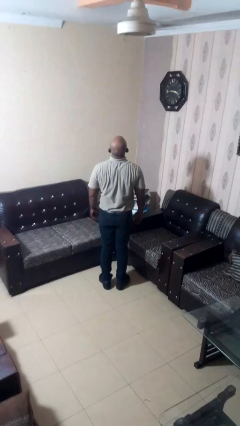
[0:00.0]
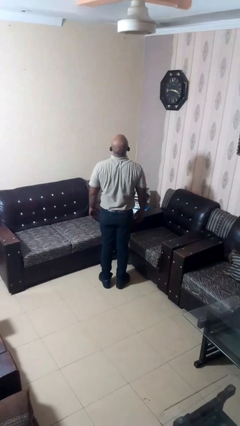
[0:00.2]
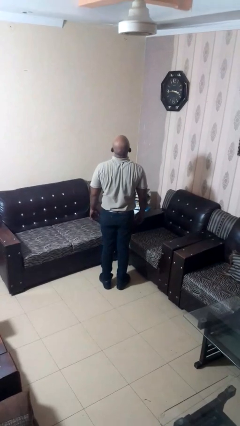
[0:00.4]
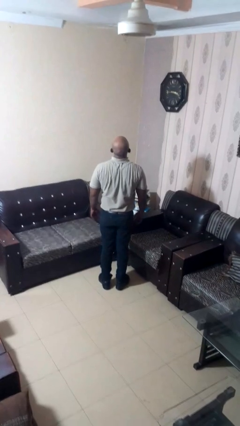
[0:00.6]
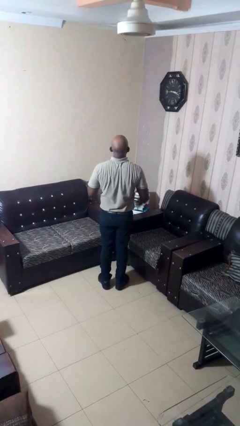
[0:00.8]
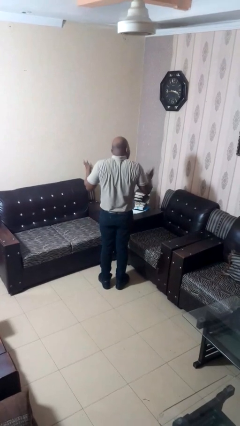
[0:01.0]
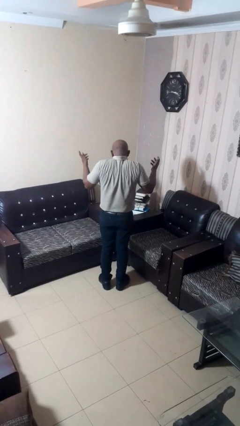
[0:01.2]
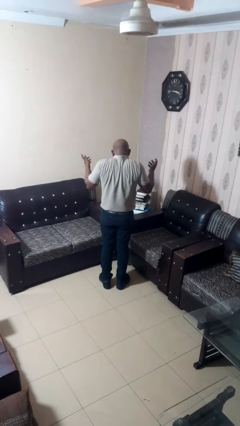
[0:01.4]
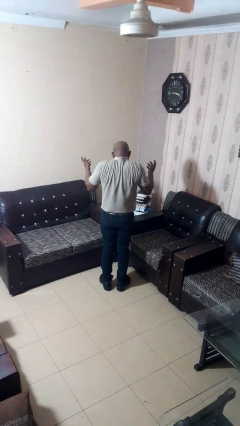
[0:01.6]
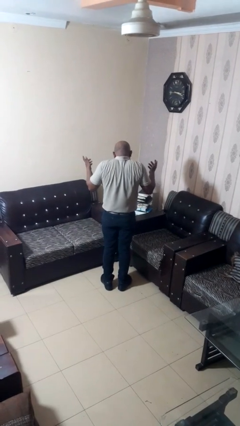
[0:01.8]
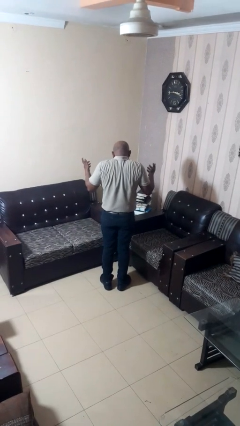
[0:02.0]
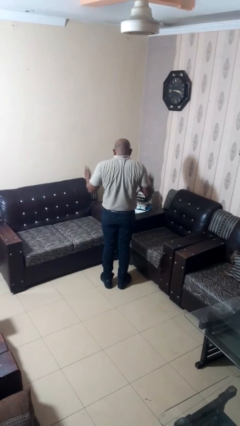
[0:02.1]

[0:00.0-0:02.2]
person shrugs

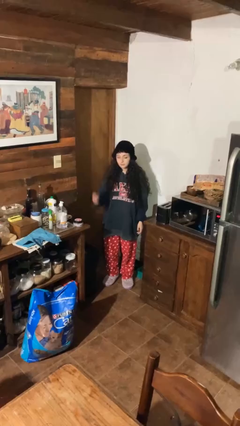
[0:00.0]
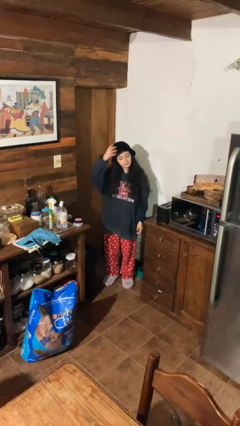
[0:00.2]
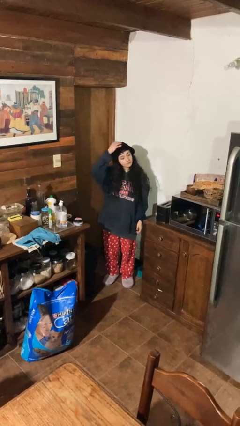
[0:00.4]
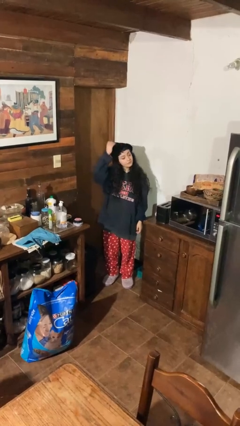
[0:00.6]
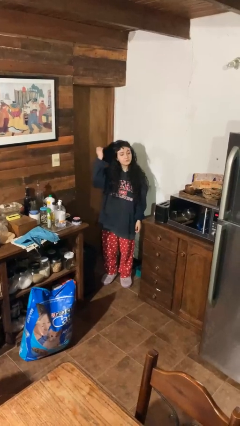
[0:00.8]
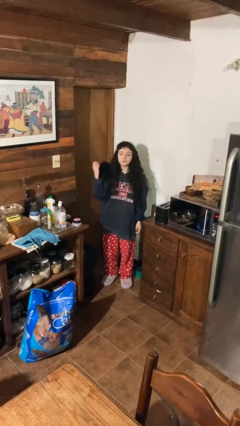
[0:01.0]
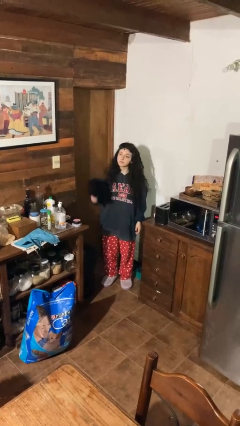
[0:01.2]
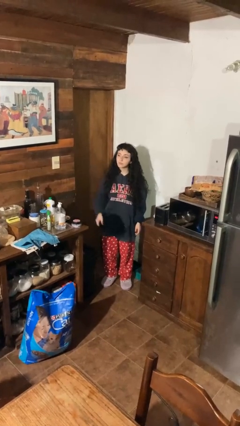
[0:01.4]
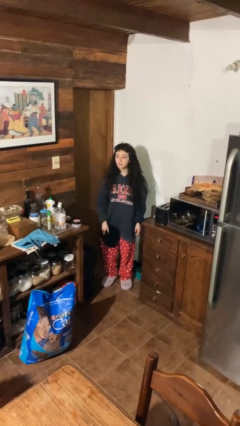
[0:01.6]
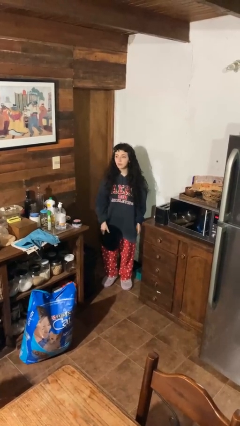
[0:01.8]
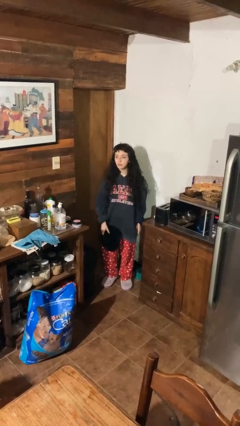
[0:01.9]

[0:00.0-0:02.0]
person takes off hat

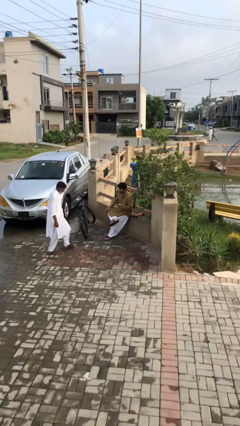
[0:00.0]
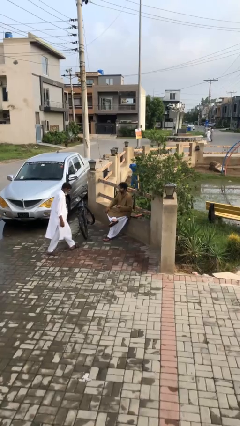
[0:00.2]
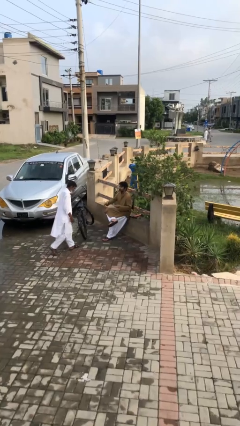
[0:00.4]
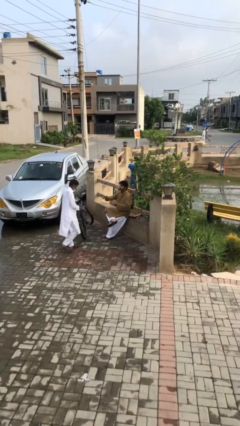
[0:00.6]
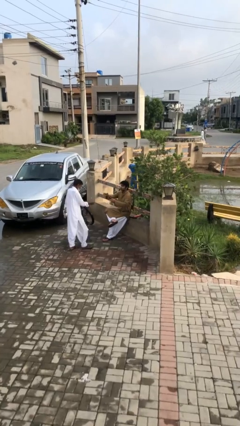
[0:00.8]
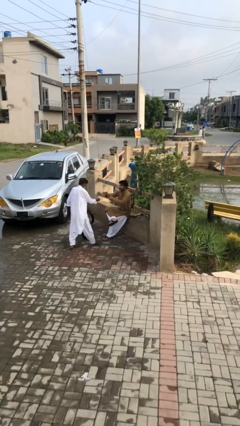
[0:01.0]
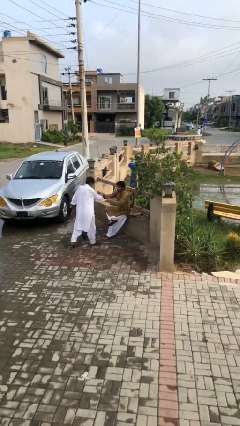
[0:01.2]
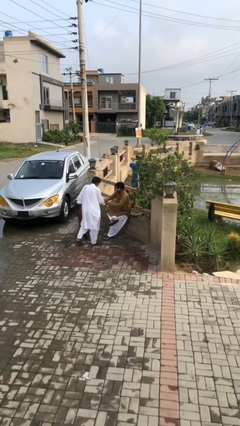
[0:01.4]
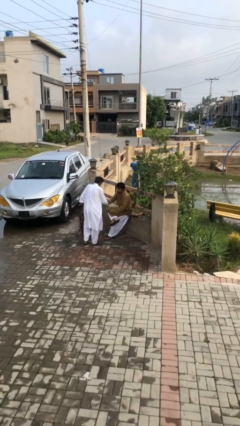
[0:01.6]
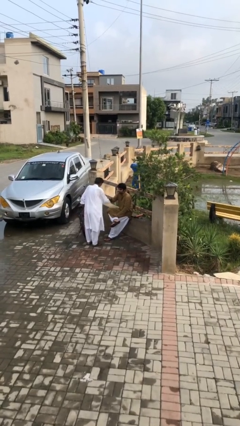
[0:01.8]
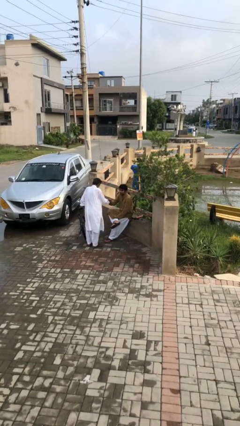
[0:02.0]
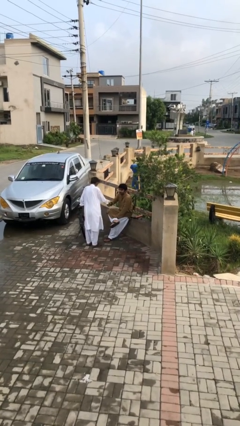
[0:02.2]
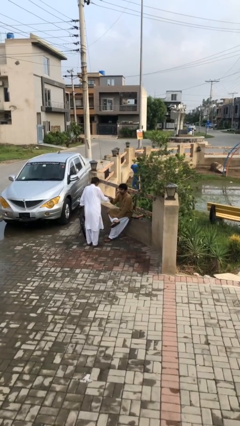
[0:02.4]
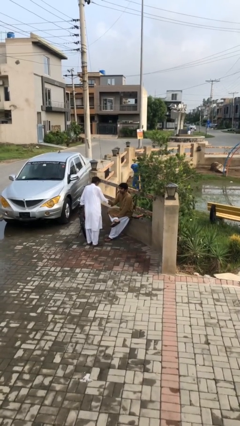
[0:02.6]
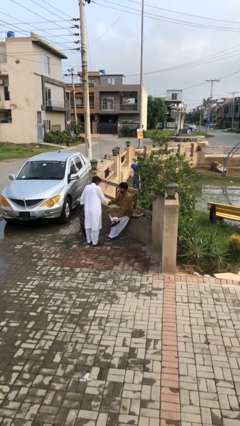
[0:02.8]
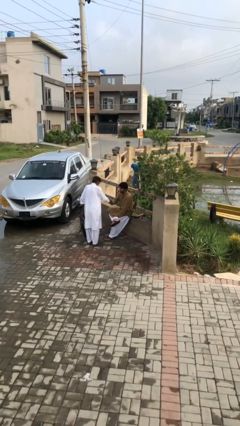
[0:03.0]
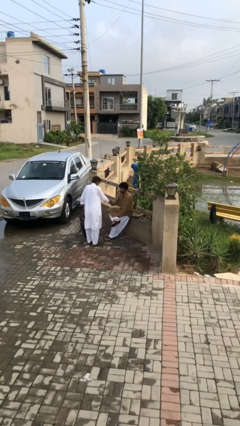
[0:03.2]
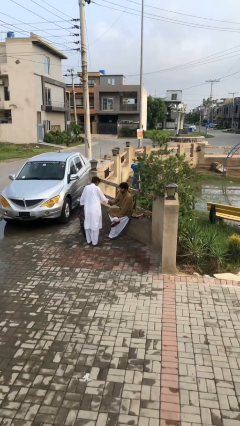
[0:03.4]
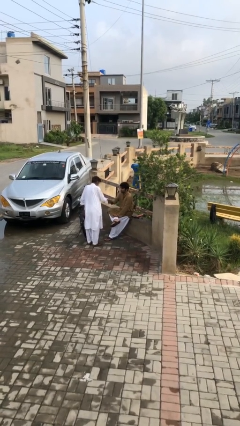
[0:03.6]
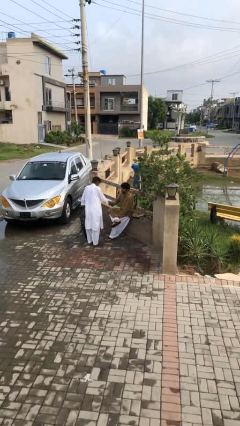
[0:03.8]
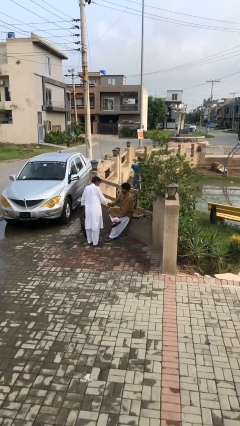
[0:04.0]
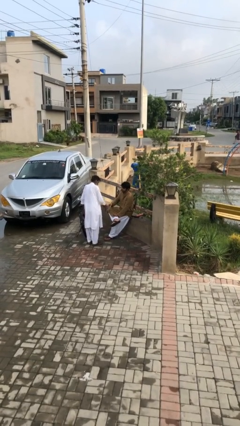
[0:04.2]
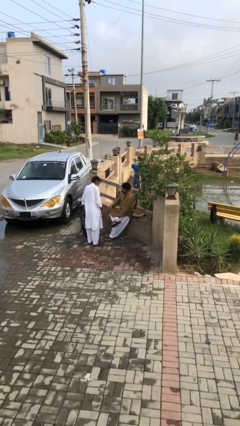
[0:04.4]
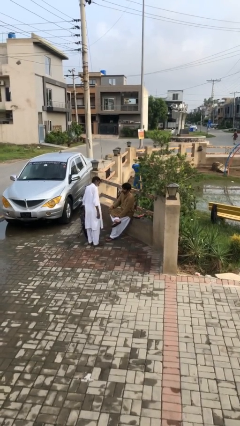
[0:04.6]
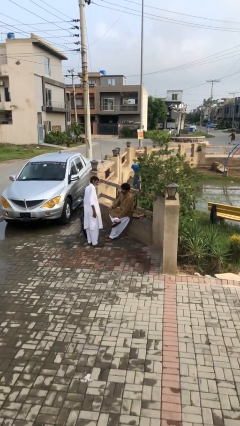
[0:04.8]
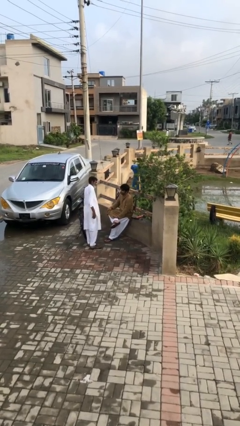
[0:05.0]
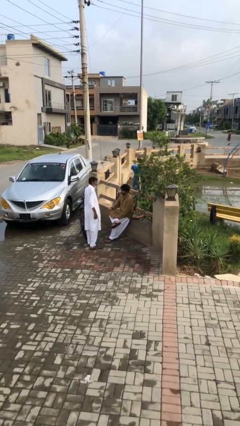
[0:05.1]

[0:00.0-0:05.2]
person shakes hand

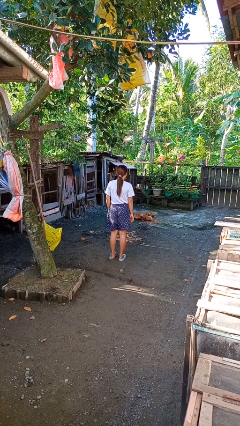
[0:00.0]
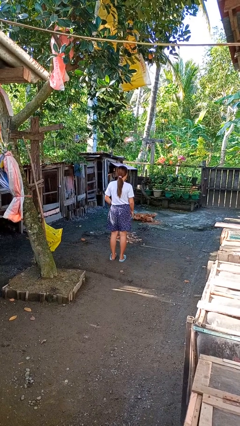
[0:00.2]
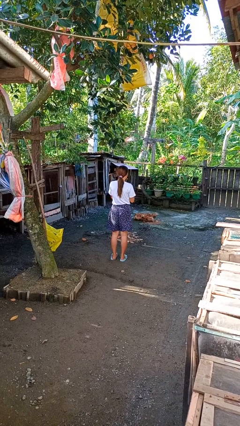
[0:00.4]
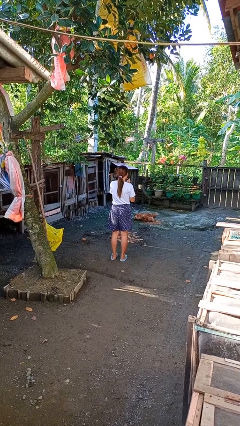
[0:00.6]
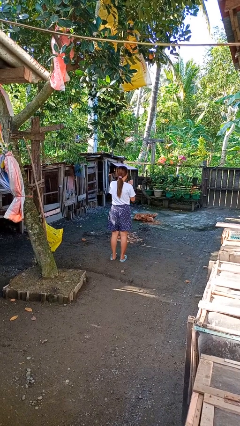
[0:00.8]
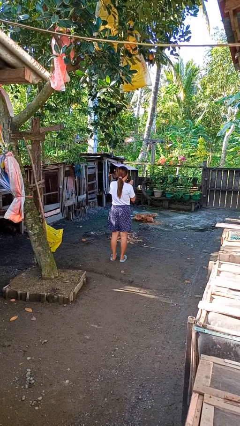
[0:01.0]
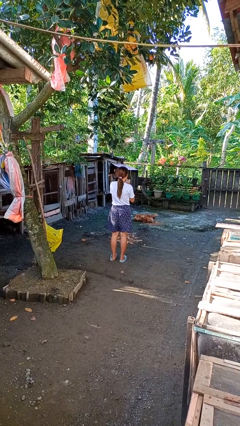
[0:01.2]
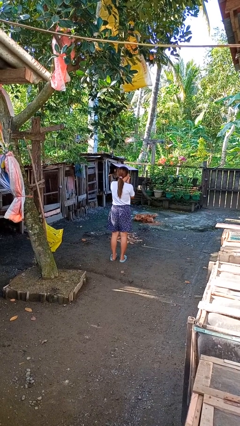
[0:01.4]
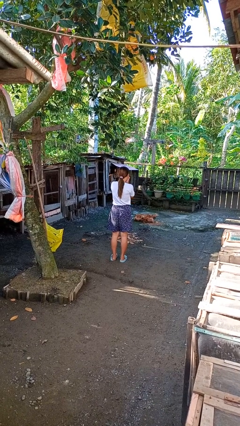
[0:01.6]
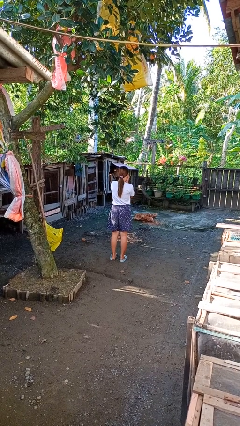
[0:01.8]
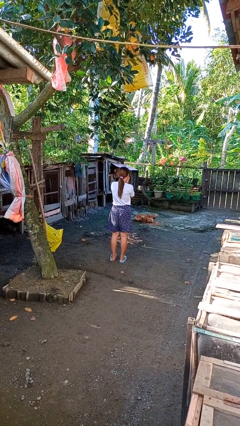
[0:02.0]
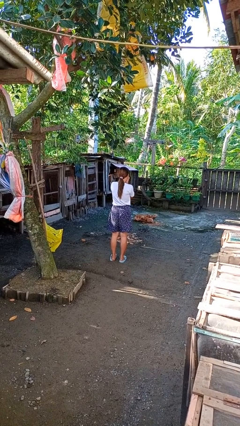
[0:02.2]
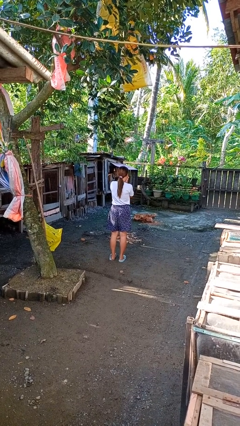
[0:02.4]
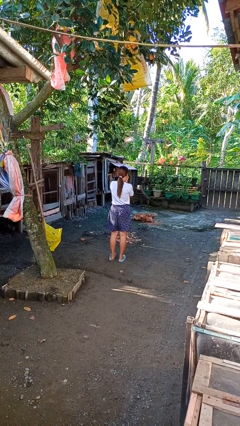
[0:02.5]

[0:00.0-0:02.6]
person blows into hands

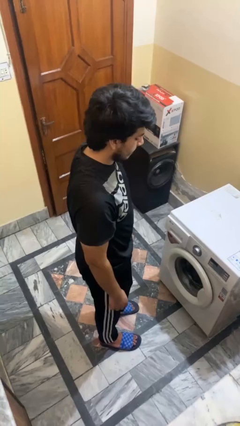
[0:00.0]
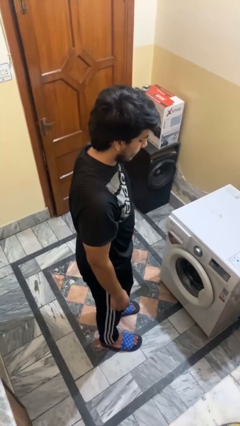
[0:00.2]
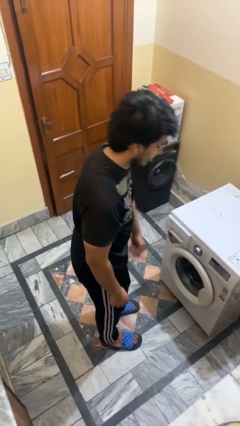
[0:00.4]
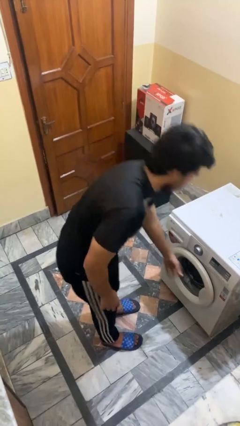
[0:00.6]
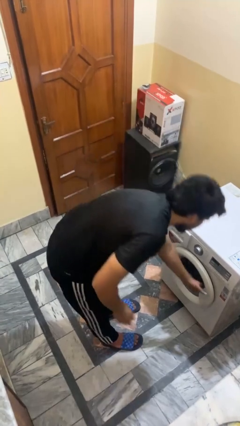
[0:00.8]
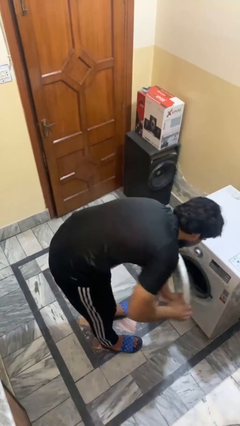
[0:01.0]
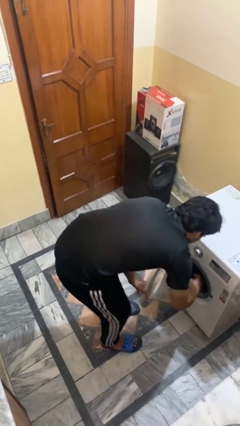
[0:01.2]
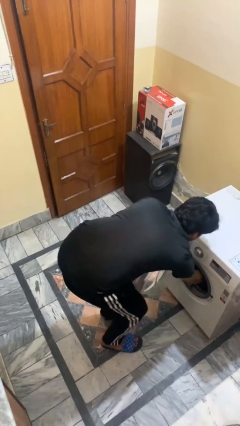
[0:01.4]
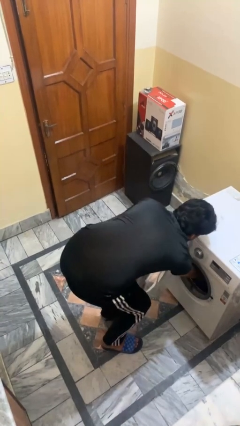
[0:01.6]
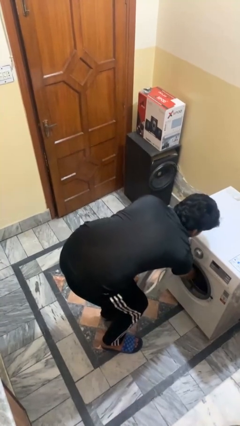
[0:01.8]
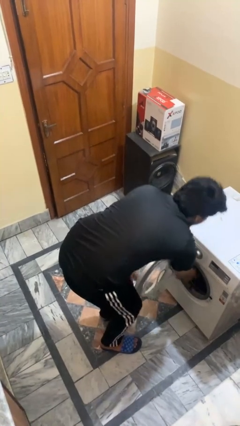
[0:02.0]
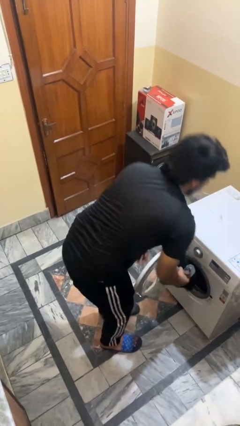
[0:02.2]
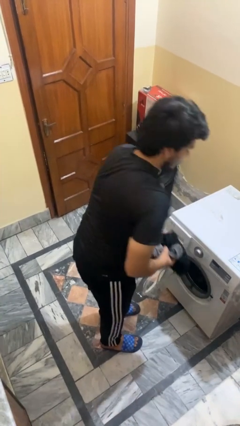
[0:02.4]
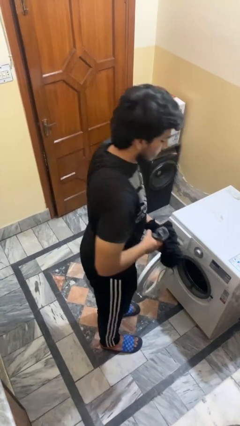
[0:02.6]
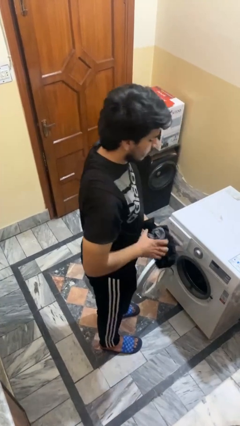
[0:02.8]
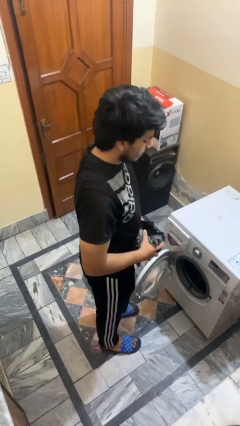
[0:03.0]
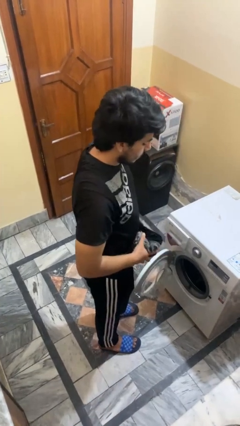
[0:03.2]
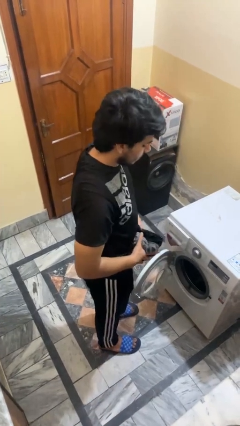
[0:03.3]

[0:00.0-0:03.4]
person unloads clotheswasher

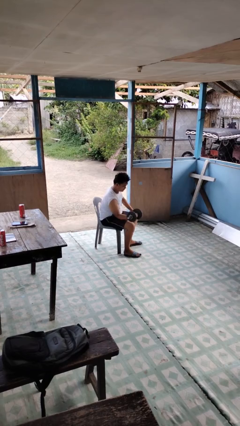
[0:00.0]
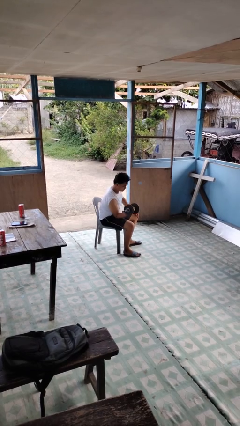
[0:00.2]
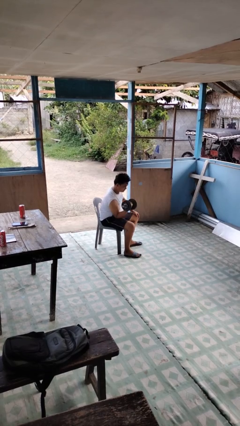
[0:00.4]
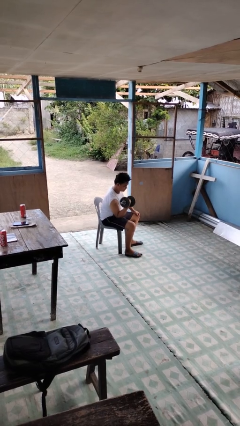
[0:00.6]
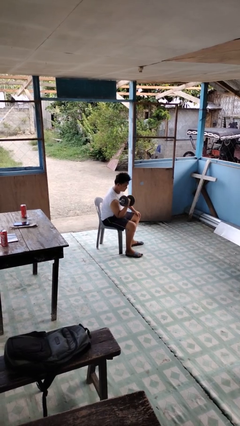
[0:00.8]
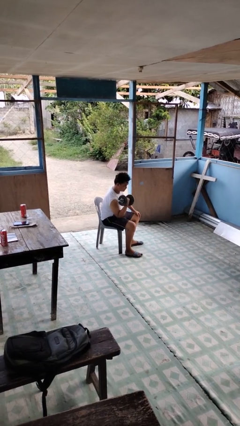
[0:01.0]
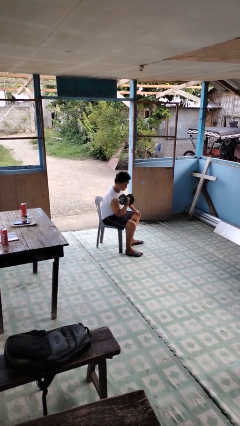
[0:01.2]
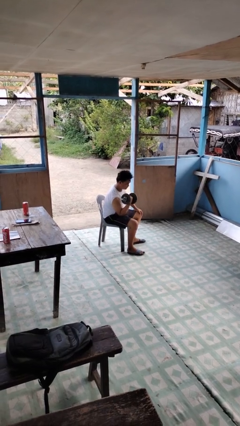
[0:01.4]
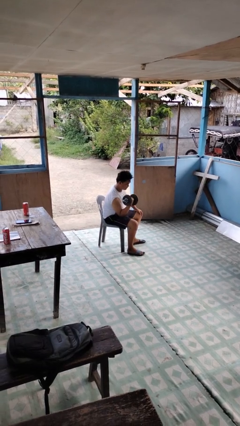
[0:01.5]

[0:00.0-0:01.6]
person lifts dumbbells

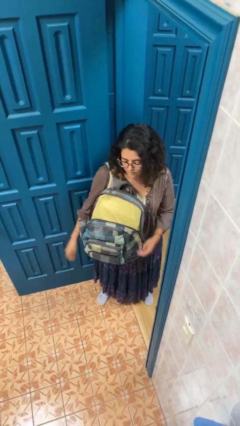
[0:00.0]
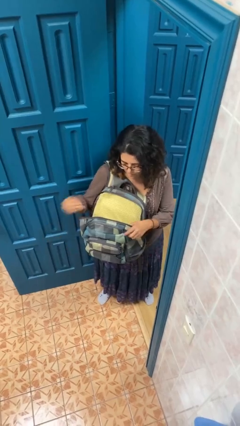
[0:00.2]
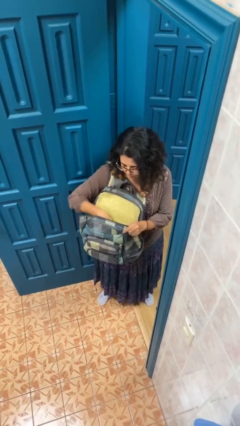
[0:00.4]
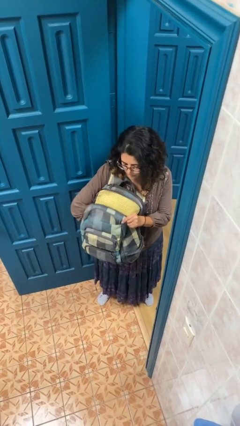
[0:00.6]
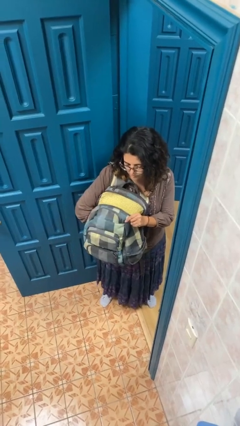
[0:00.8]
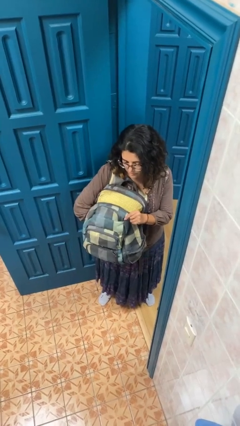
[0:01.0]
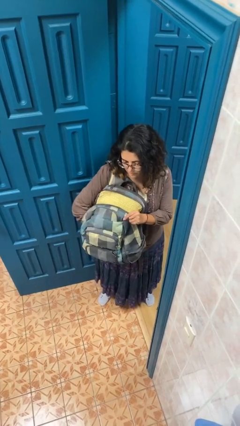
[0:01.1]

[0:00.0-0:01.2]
person searches in backpack
